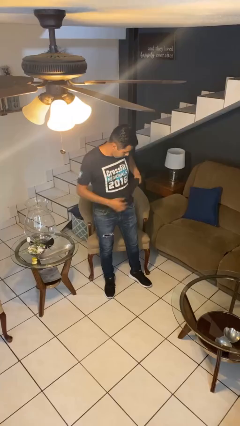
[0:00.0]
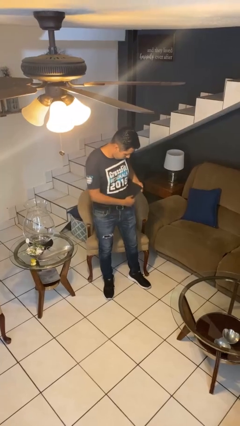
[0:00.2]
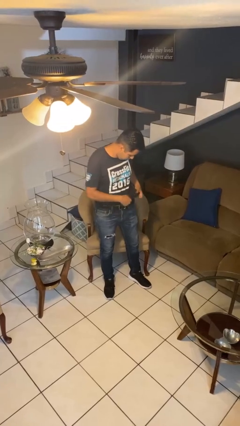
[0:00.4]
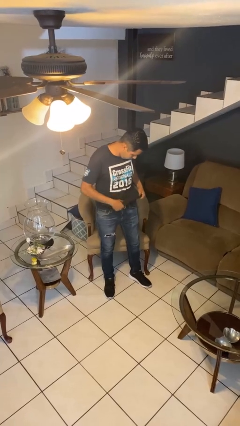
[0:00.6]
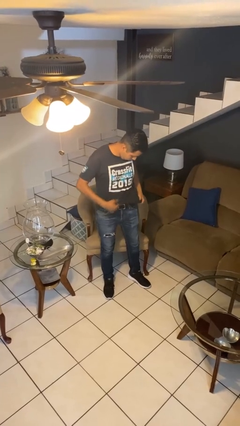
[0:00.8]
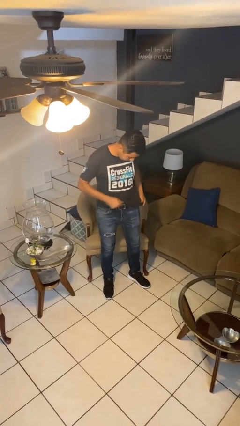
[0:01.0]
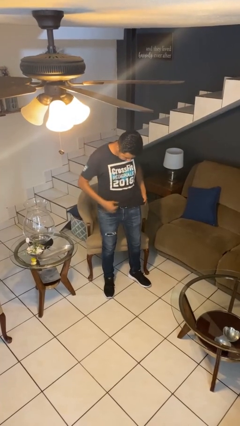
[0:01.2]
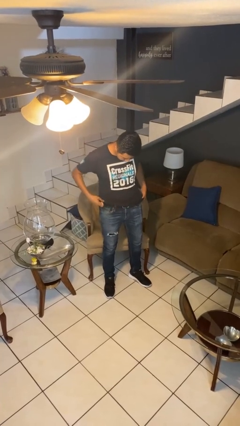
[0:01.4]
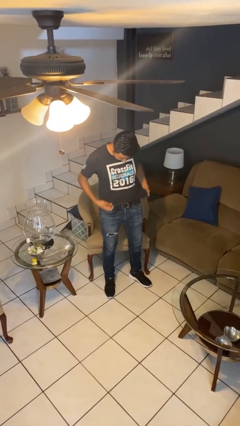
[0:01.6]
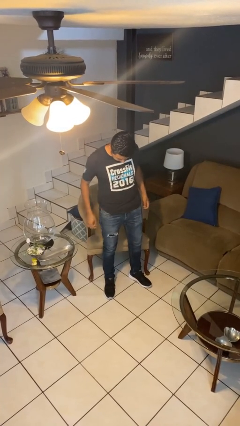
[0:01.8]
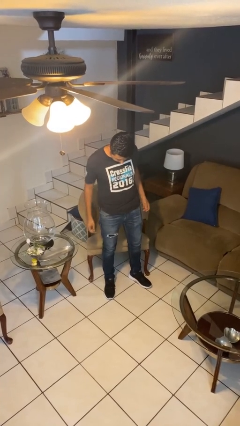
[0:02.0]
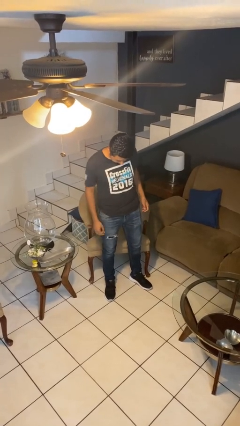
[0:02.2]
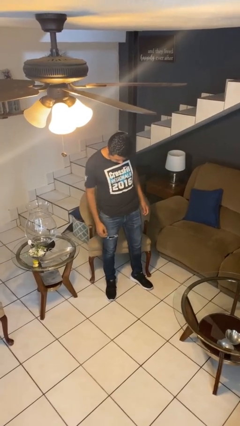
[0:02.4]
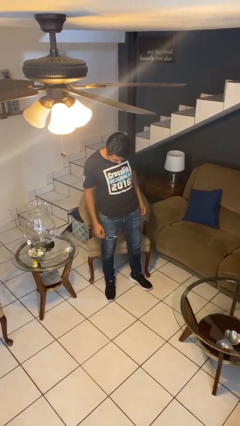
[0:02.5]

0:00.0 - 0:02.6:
person untucks shirt

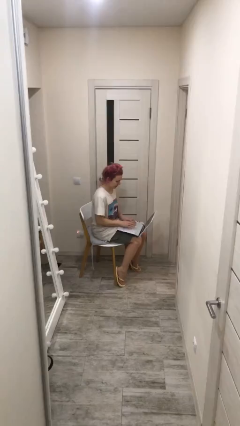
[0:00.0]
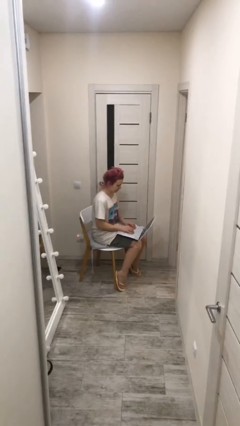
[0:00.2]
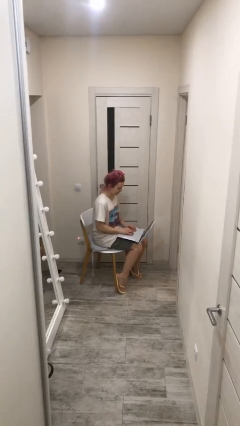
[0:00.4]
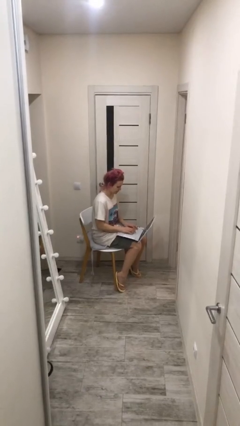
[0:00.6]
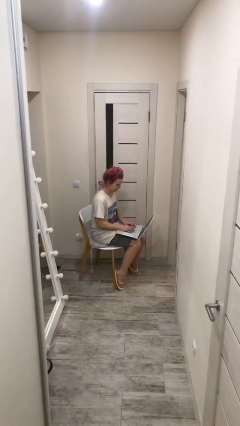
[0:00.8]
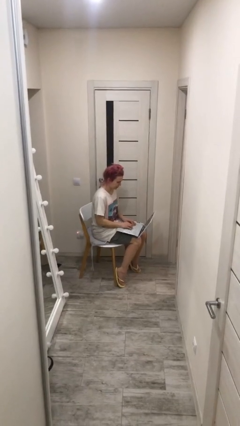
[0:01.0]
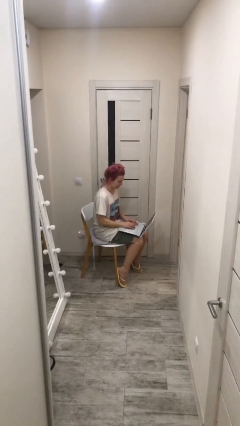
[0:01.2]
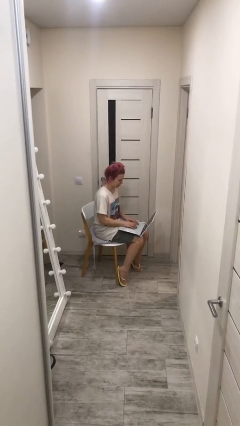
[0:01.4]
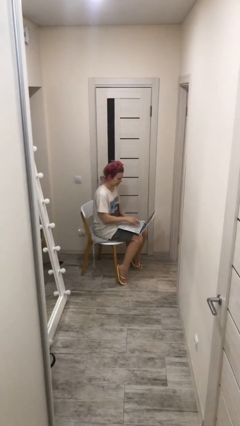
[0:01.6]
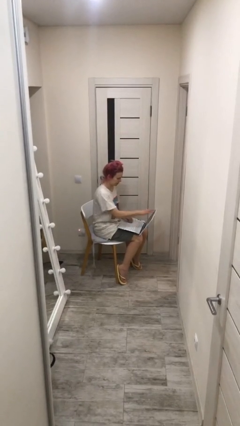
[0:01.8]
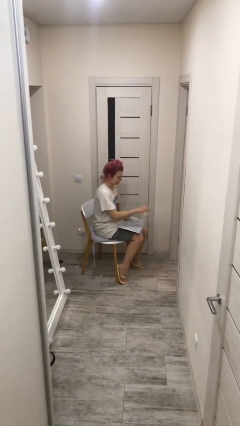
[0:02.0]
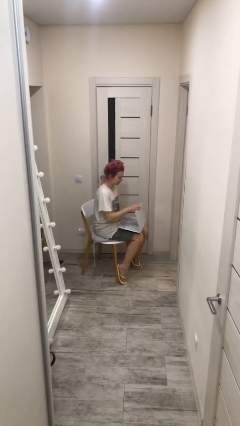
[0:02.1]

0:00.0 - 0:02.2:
person interacts with laptop

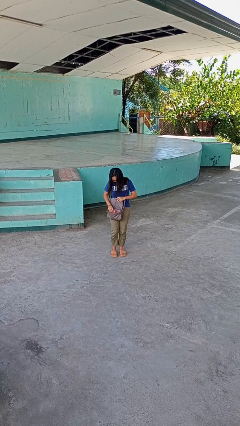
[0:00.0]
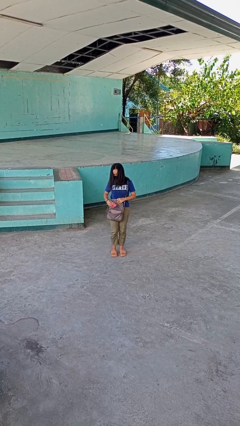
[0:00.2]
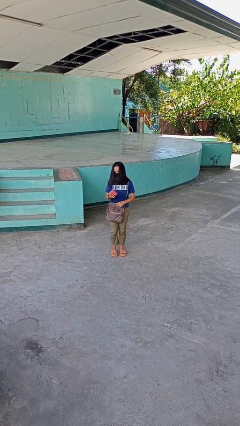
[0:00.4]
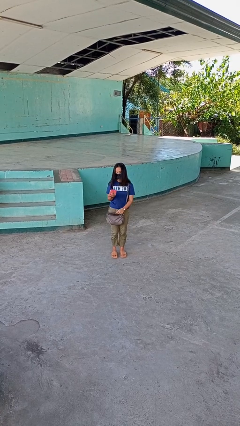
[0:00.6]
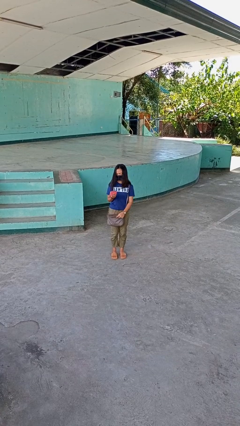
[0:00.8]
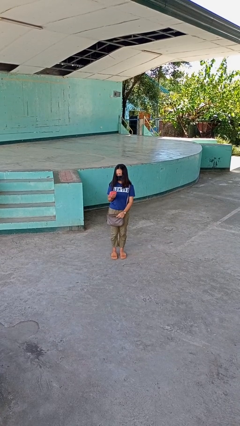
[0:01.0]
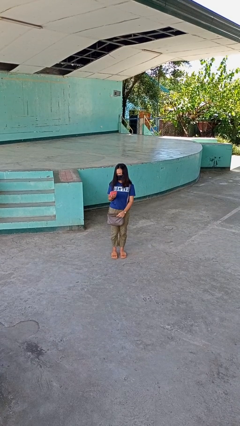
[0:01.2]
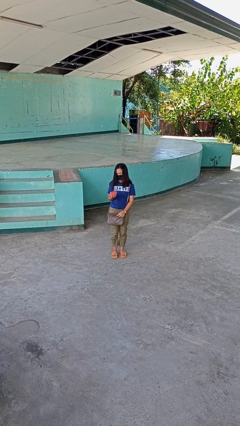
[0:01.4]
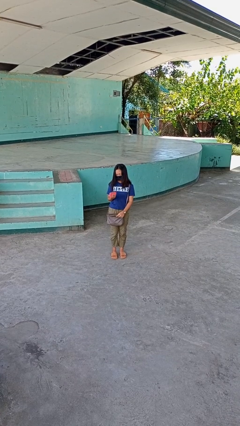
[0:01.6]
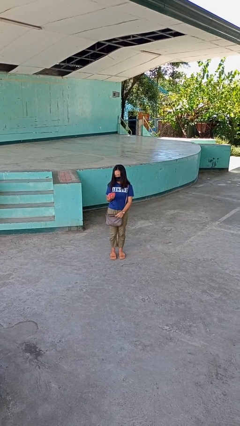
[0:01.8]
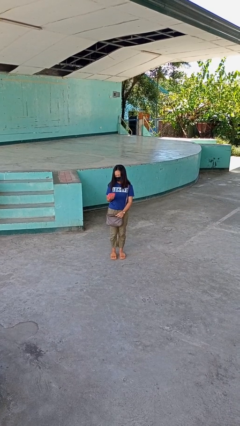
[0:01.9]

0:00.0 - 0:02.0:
person takes object from purse

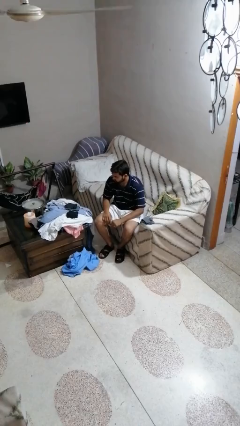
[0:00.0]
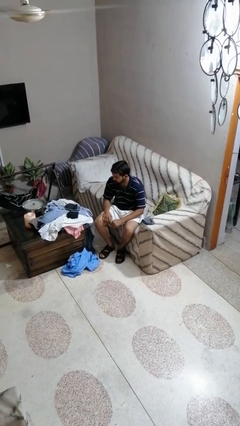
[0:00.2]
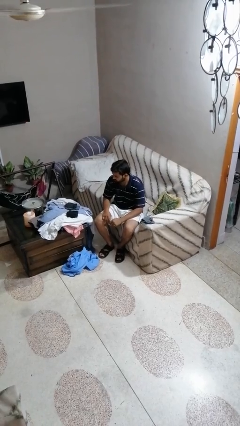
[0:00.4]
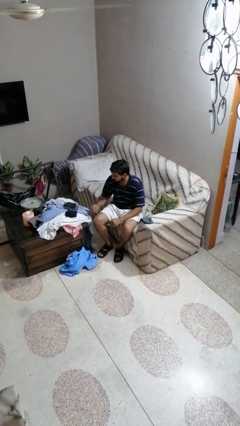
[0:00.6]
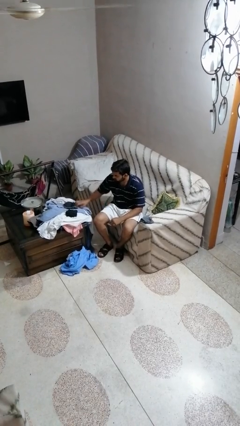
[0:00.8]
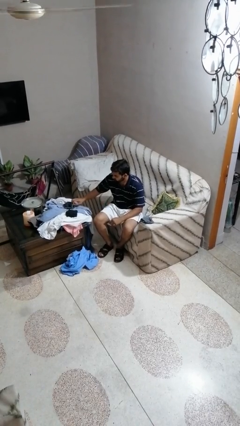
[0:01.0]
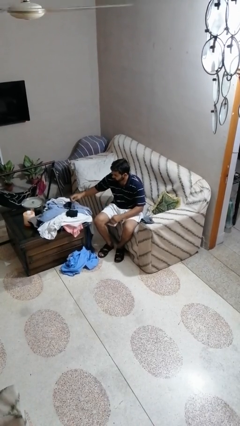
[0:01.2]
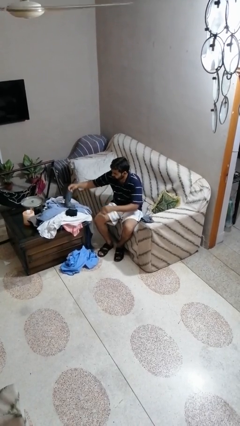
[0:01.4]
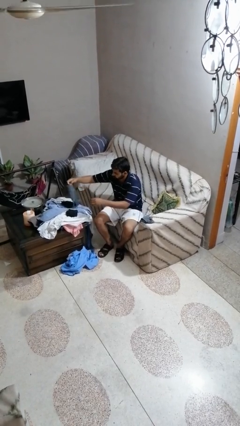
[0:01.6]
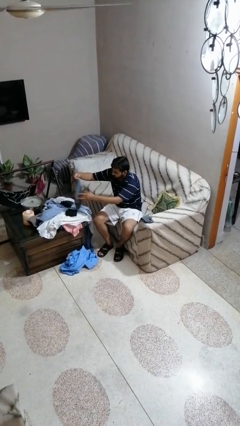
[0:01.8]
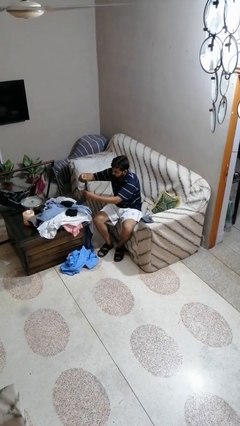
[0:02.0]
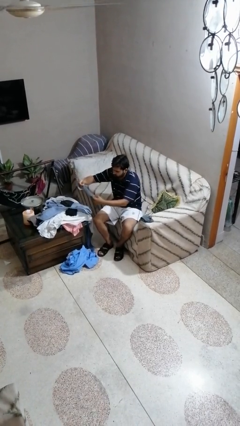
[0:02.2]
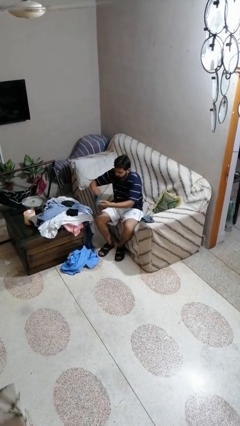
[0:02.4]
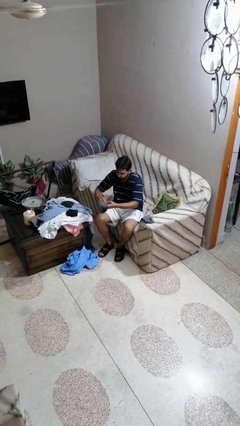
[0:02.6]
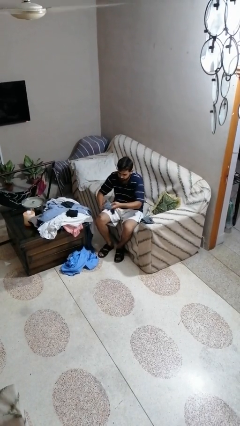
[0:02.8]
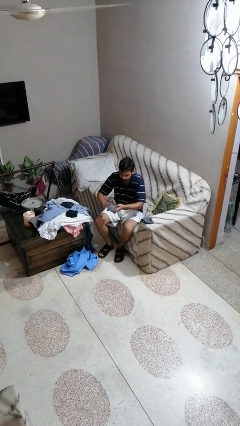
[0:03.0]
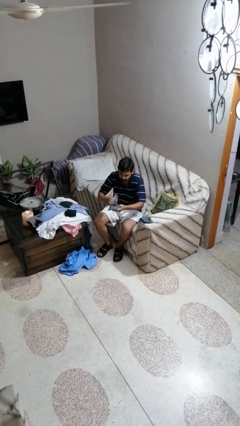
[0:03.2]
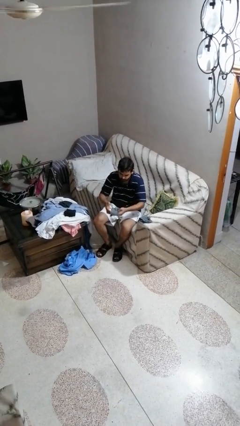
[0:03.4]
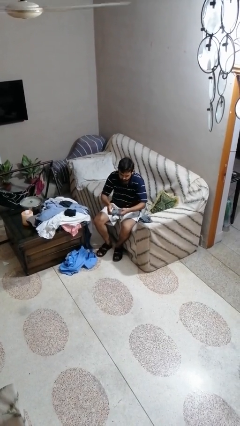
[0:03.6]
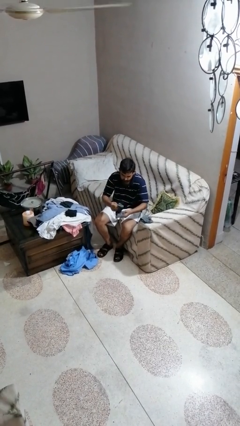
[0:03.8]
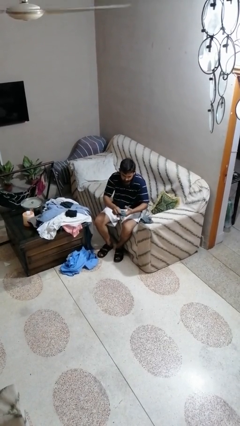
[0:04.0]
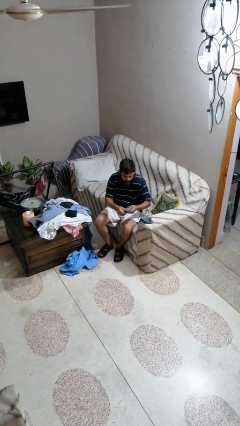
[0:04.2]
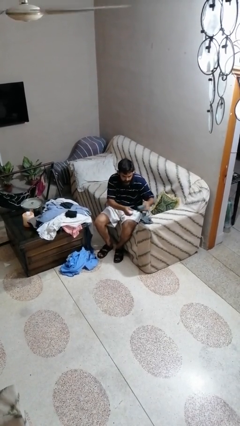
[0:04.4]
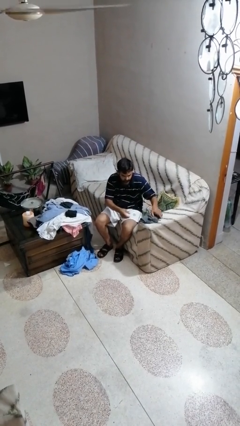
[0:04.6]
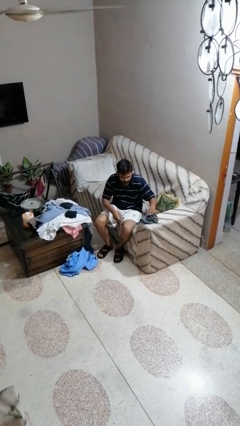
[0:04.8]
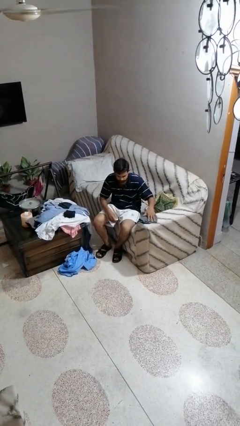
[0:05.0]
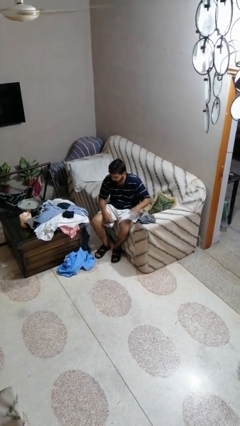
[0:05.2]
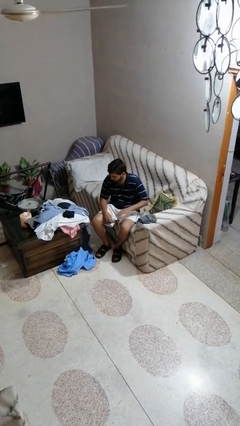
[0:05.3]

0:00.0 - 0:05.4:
person folds socks

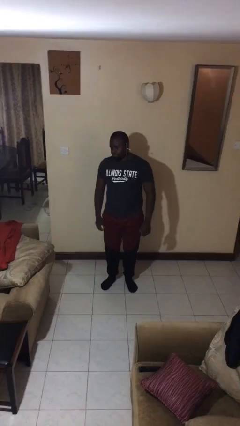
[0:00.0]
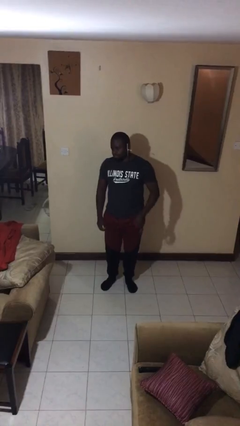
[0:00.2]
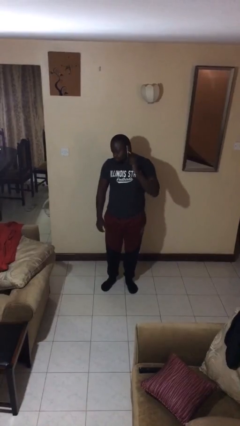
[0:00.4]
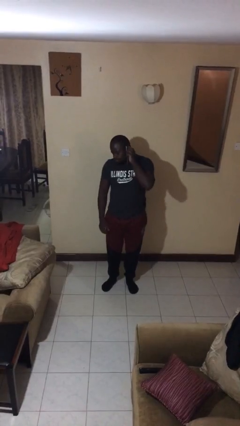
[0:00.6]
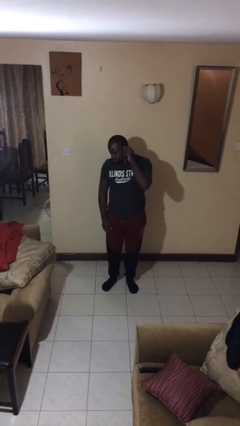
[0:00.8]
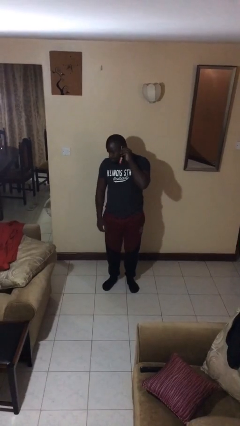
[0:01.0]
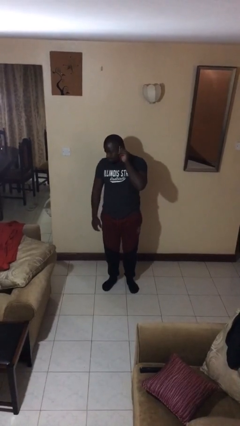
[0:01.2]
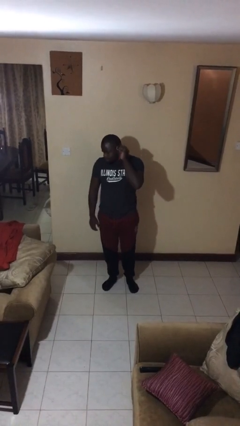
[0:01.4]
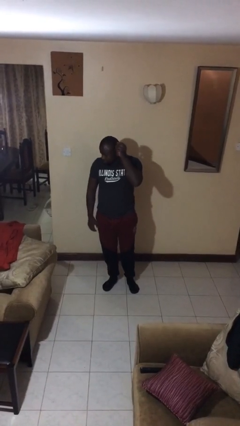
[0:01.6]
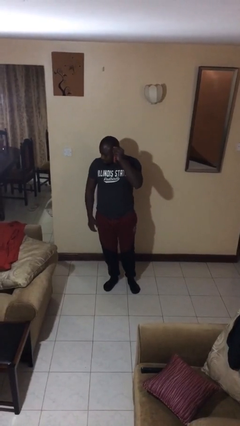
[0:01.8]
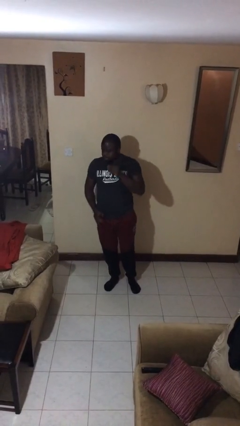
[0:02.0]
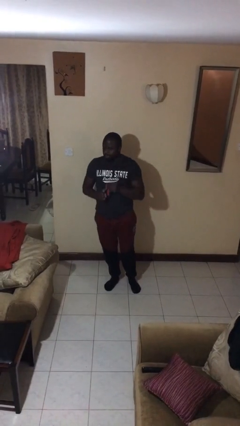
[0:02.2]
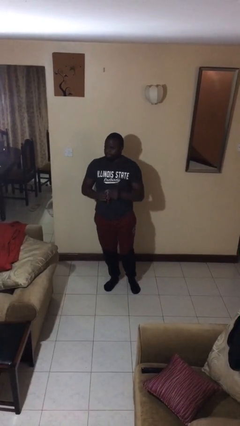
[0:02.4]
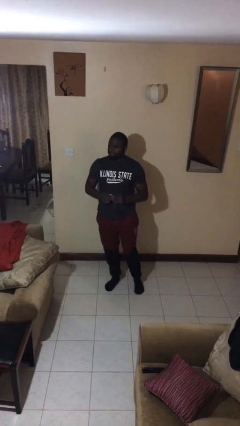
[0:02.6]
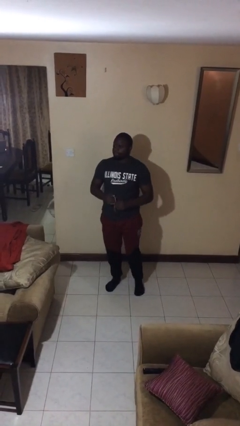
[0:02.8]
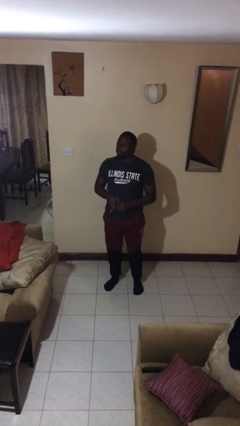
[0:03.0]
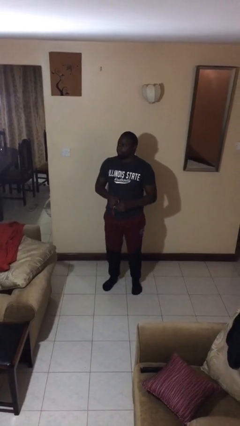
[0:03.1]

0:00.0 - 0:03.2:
person takes off earrings

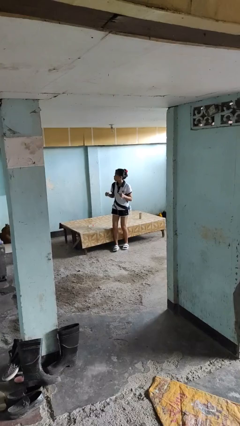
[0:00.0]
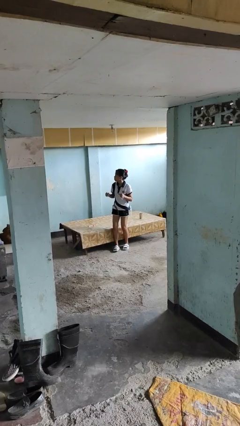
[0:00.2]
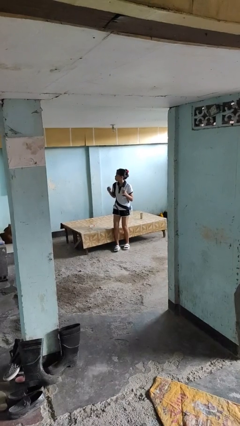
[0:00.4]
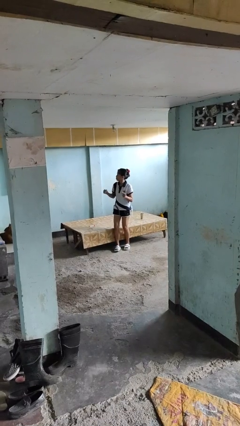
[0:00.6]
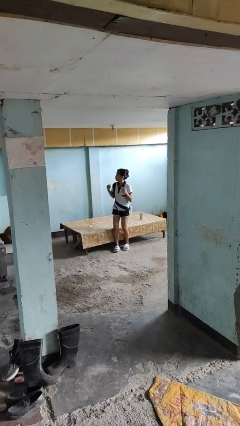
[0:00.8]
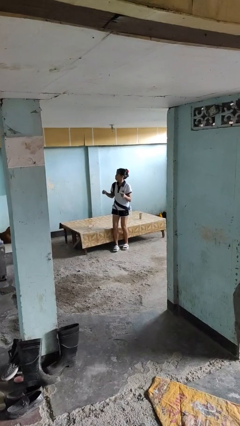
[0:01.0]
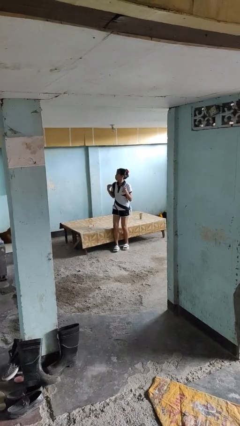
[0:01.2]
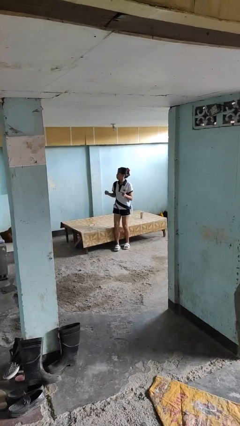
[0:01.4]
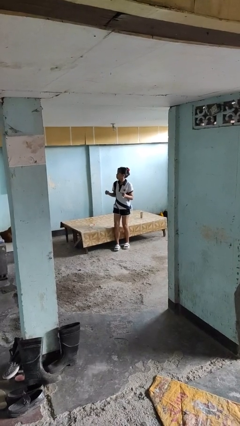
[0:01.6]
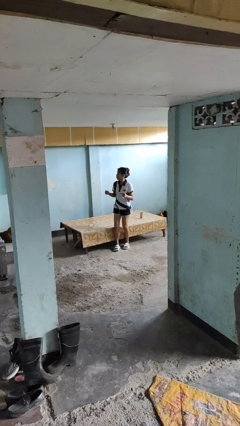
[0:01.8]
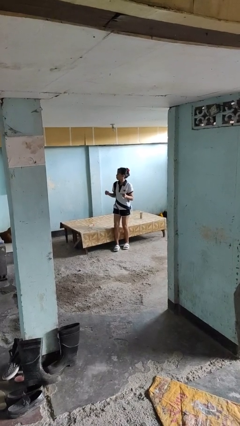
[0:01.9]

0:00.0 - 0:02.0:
person snaps fingers

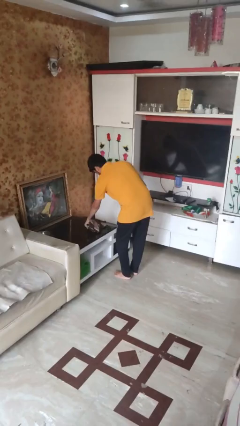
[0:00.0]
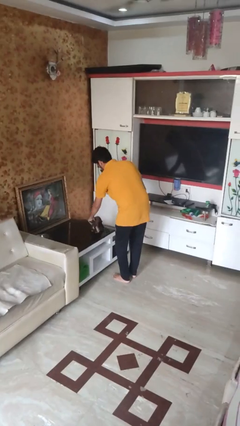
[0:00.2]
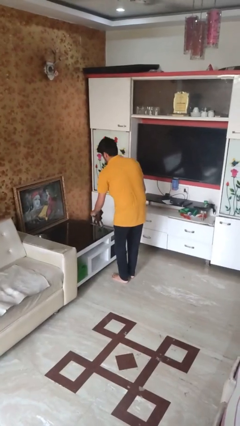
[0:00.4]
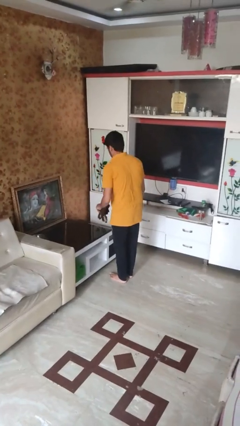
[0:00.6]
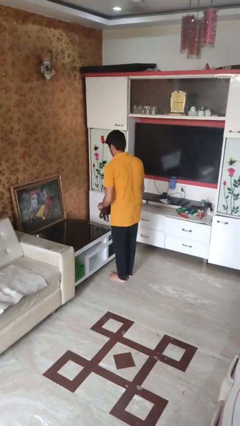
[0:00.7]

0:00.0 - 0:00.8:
person picks up object from table
